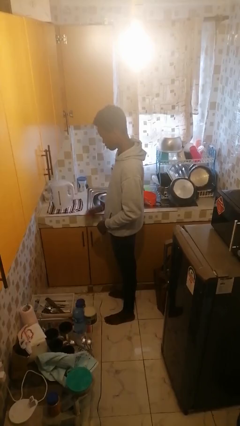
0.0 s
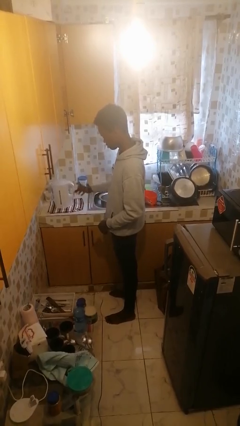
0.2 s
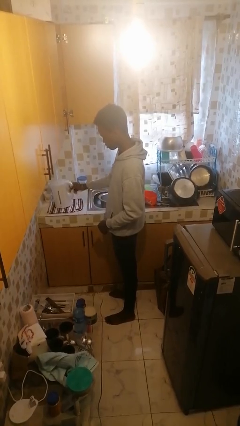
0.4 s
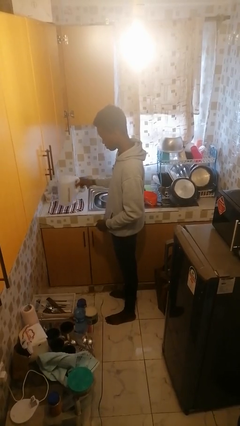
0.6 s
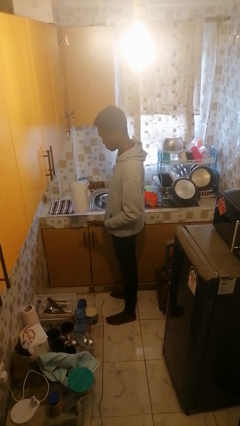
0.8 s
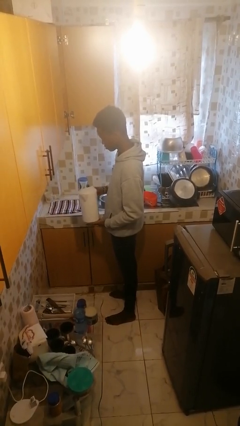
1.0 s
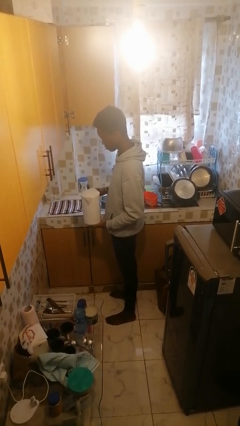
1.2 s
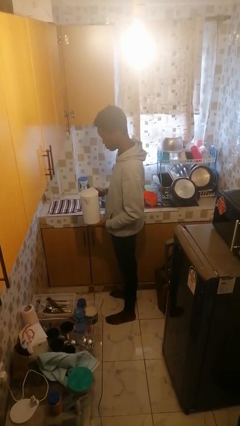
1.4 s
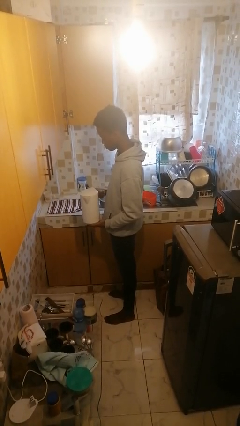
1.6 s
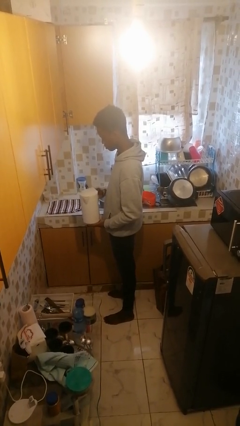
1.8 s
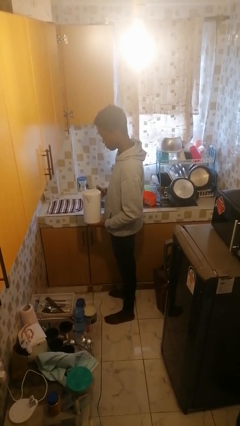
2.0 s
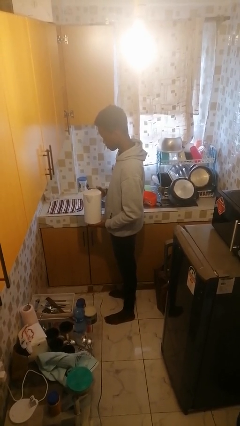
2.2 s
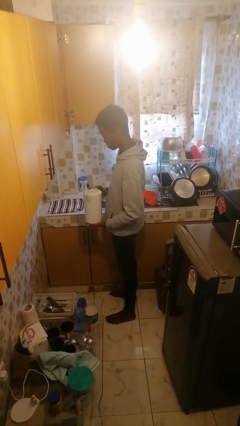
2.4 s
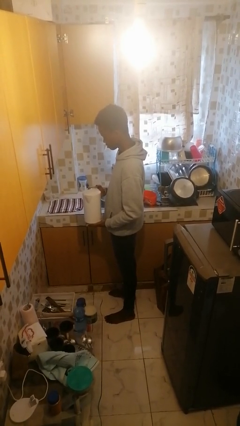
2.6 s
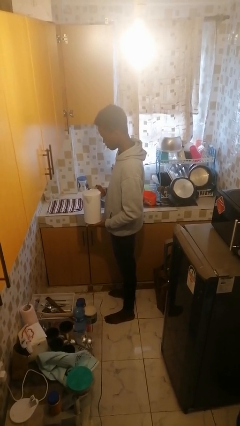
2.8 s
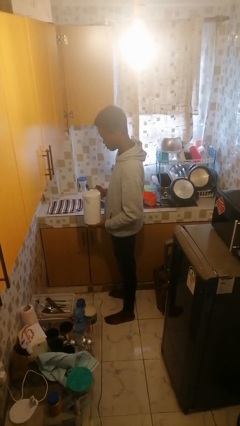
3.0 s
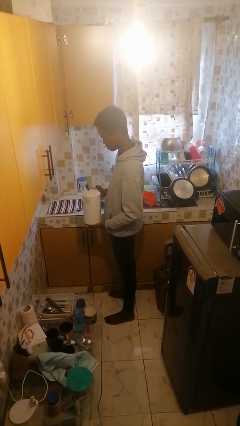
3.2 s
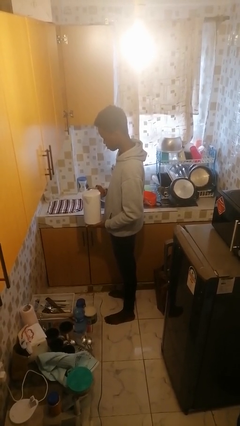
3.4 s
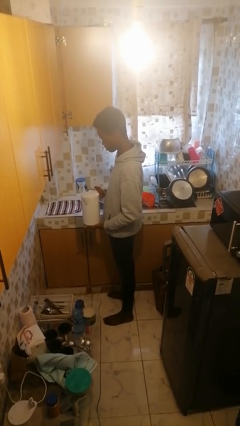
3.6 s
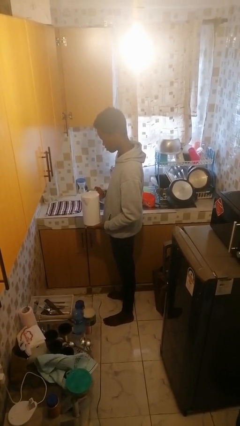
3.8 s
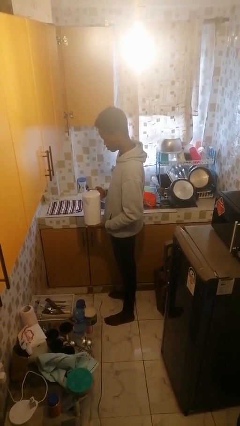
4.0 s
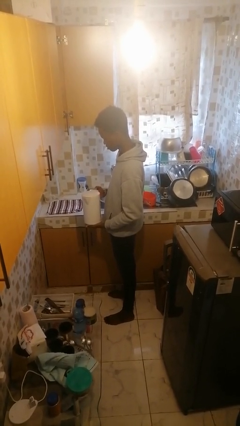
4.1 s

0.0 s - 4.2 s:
person picks up object from countertop

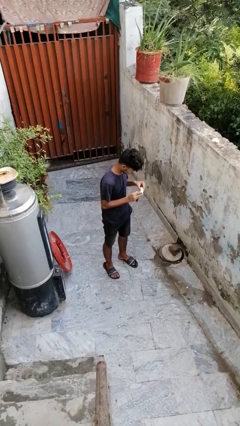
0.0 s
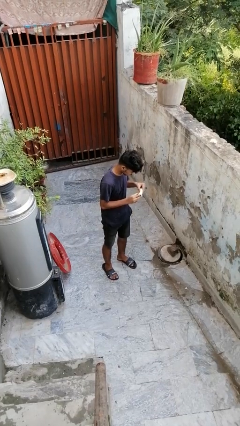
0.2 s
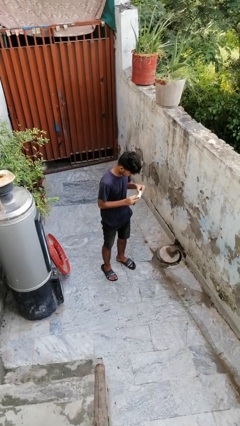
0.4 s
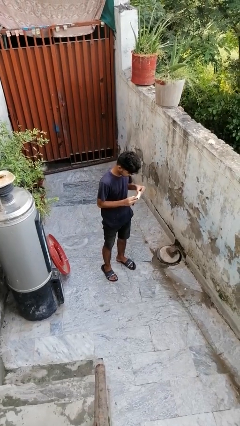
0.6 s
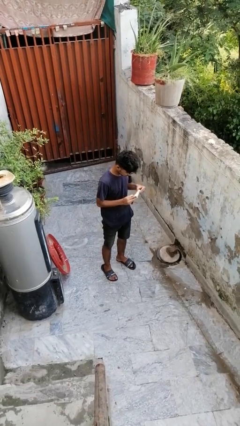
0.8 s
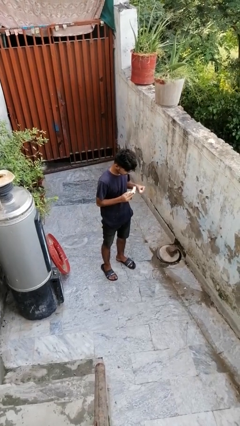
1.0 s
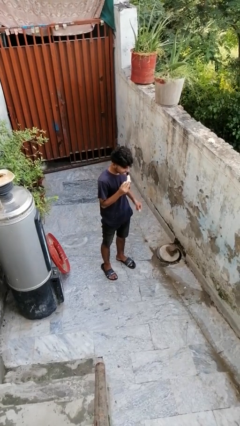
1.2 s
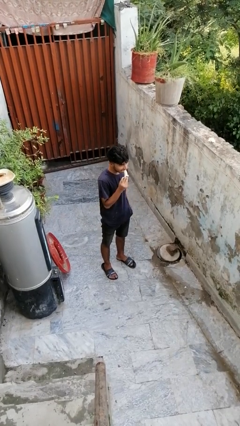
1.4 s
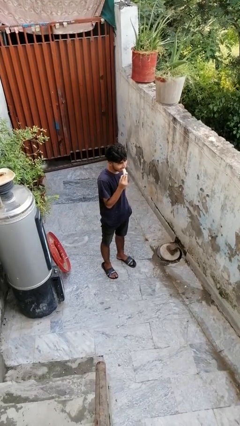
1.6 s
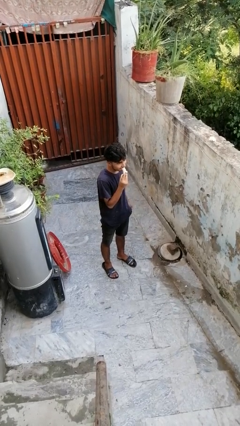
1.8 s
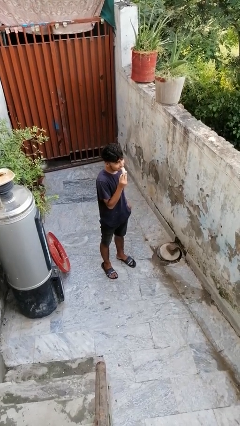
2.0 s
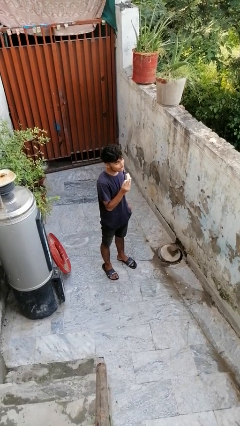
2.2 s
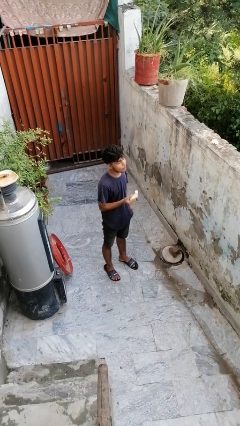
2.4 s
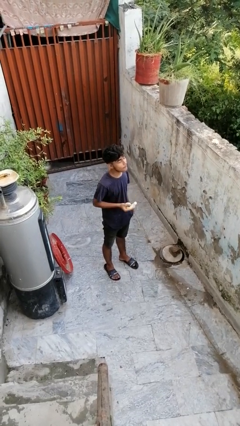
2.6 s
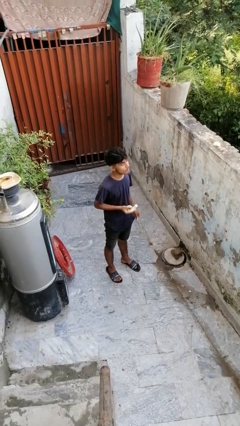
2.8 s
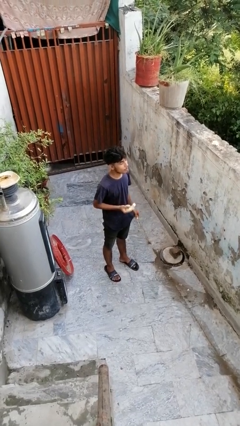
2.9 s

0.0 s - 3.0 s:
person eats banana

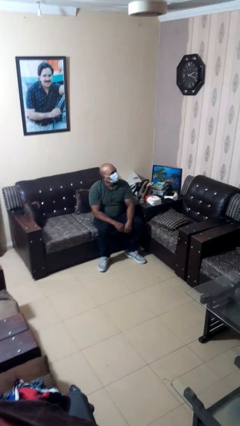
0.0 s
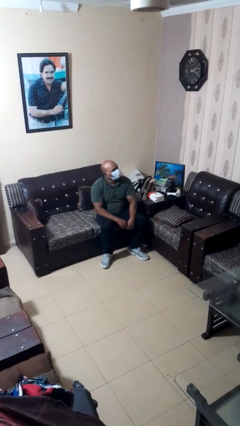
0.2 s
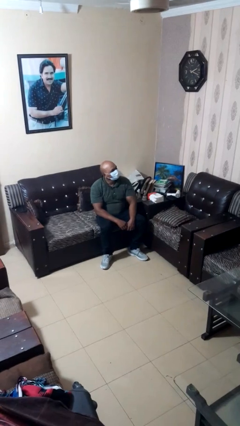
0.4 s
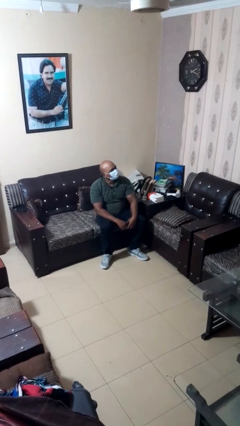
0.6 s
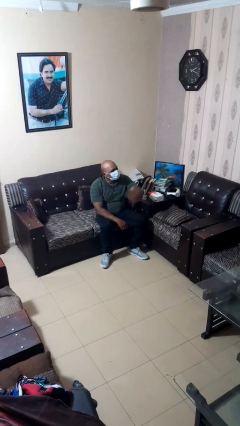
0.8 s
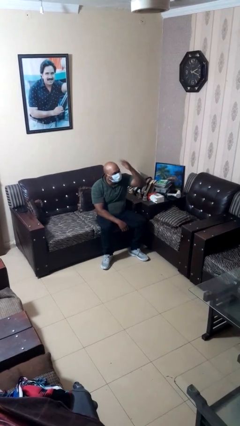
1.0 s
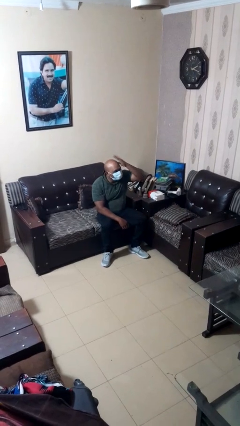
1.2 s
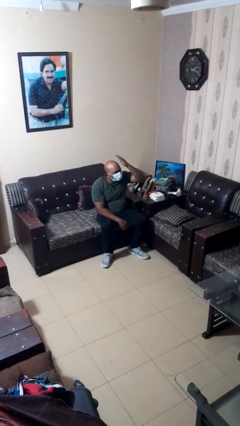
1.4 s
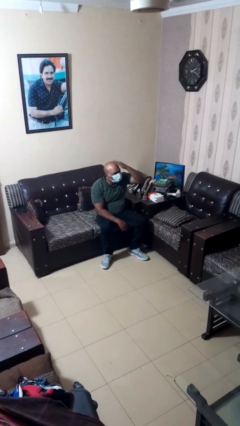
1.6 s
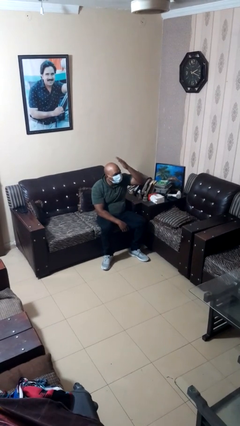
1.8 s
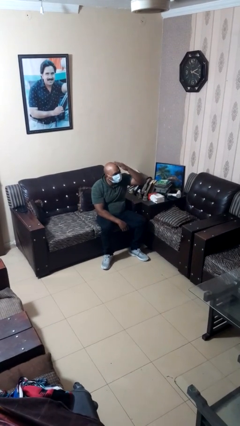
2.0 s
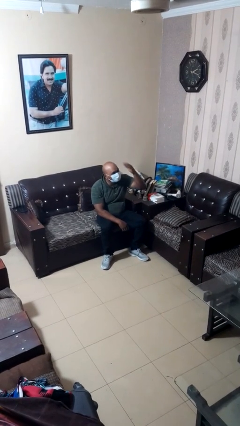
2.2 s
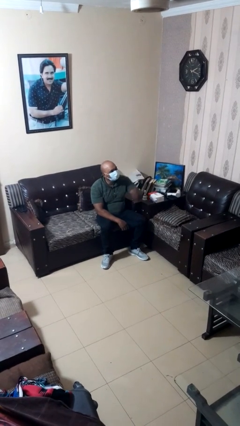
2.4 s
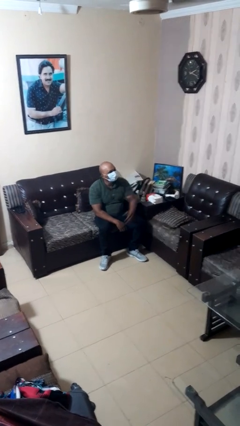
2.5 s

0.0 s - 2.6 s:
person pats head

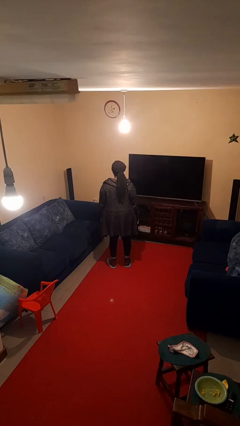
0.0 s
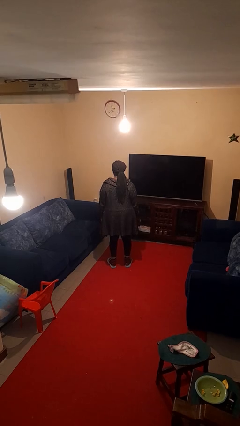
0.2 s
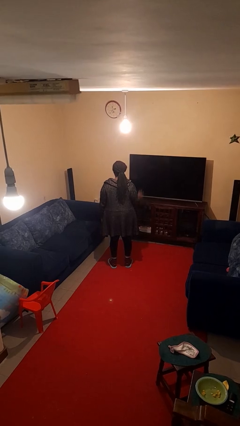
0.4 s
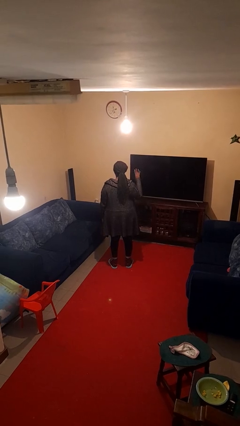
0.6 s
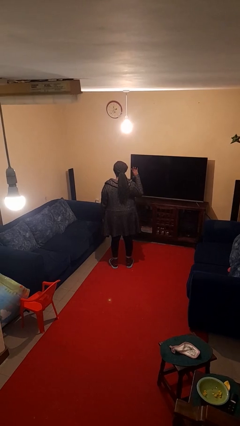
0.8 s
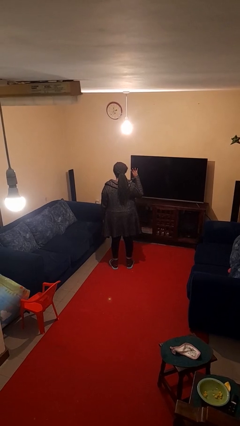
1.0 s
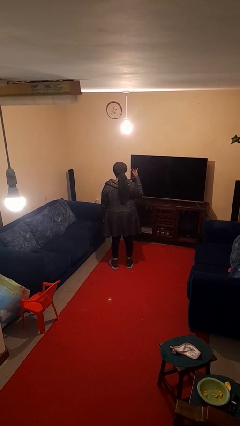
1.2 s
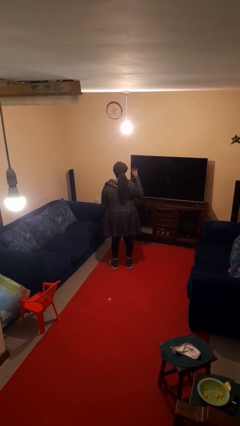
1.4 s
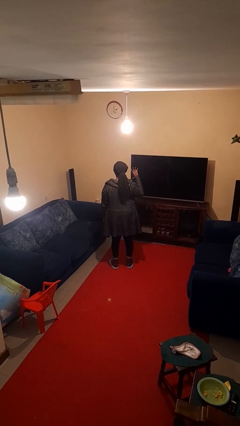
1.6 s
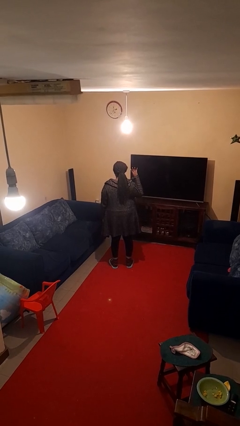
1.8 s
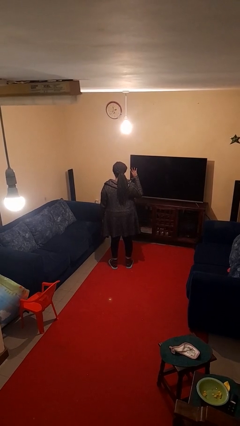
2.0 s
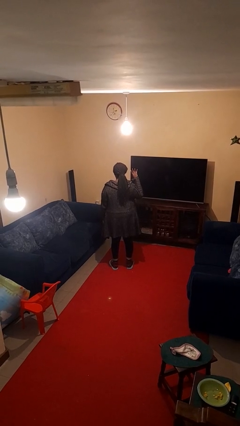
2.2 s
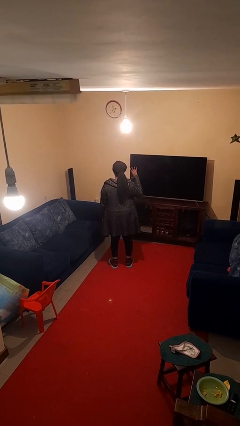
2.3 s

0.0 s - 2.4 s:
person gestures number four

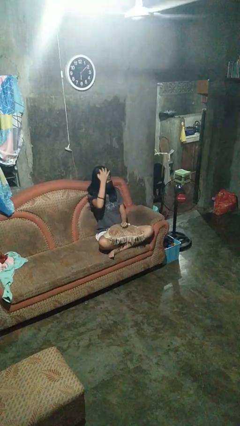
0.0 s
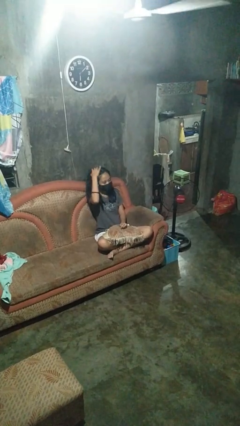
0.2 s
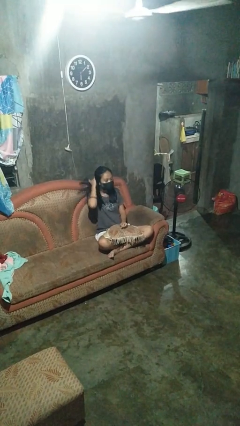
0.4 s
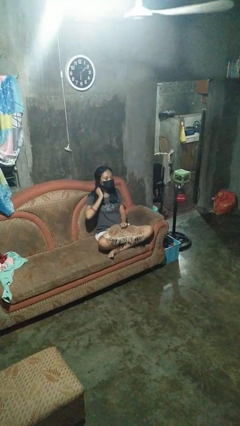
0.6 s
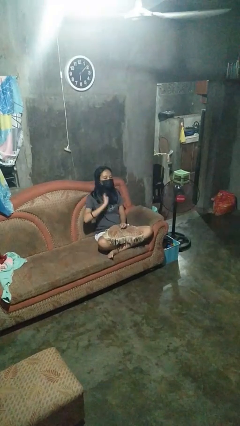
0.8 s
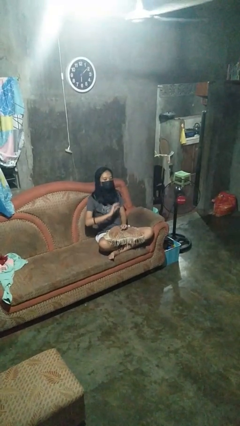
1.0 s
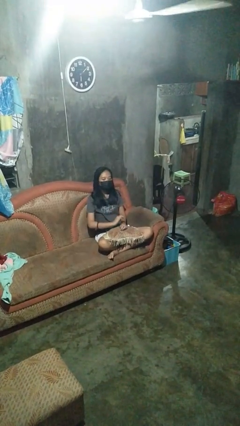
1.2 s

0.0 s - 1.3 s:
person strokes hair

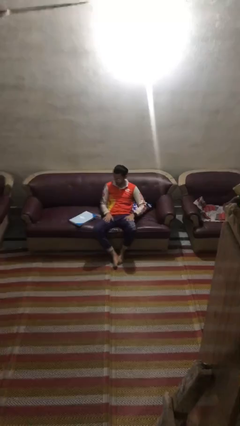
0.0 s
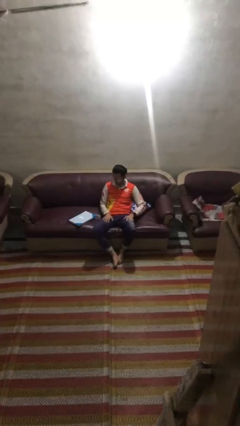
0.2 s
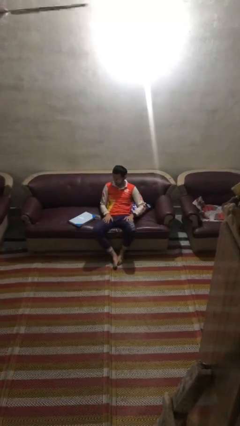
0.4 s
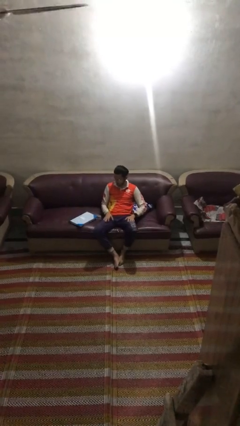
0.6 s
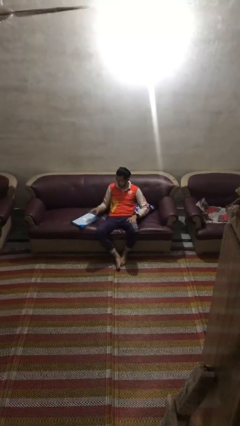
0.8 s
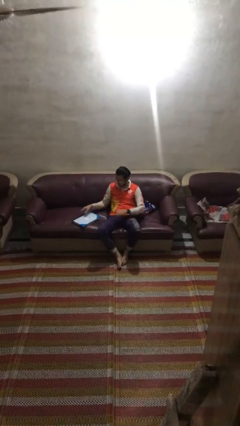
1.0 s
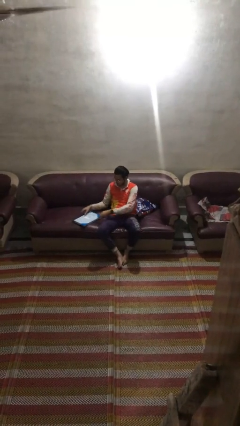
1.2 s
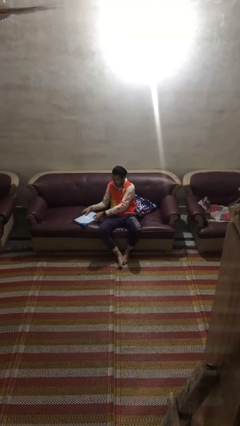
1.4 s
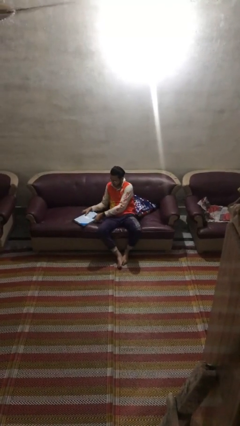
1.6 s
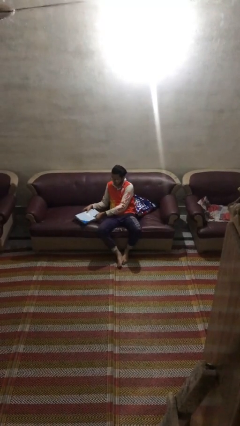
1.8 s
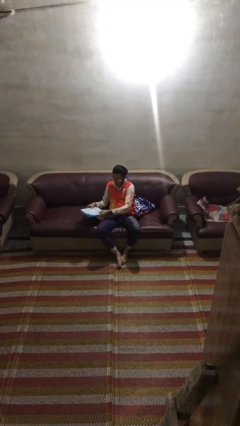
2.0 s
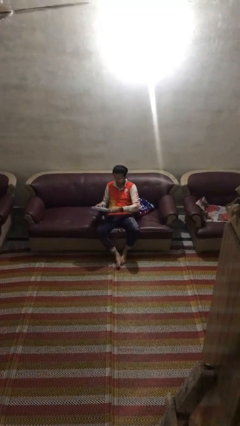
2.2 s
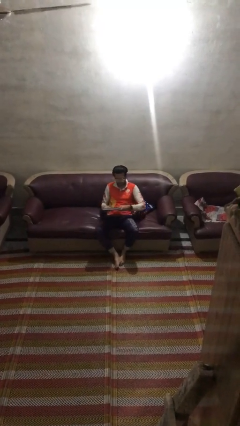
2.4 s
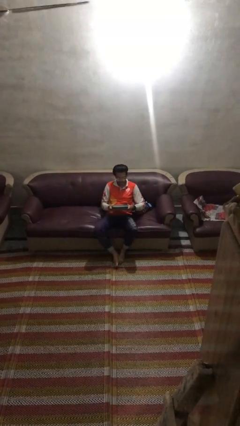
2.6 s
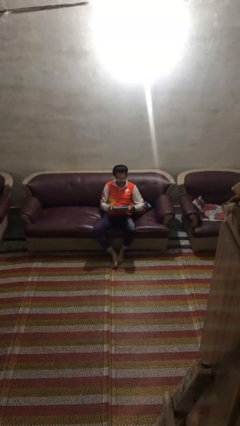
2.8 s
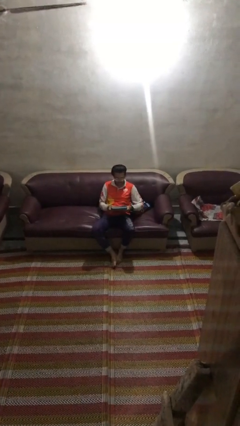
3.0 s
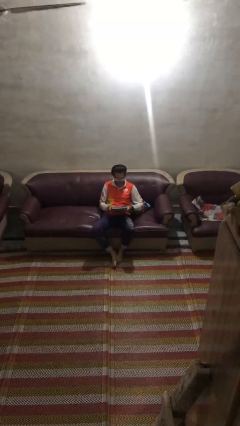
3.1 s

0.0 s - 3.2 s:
person picks up object from couch

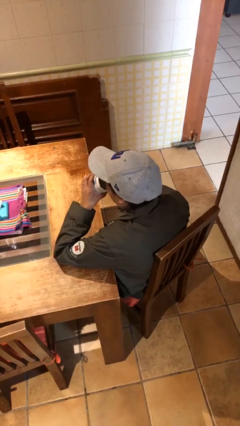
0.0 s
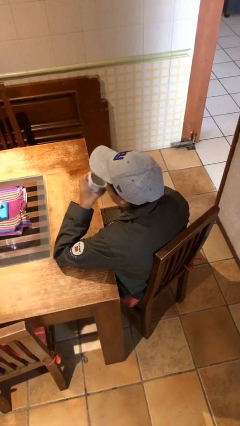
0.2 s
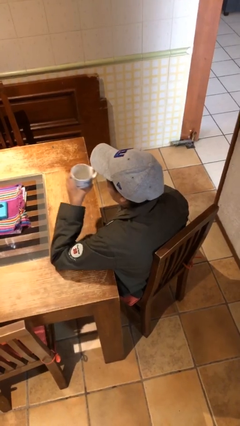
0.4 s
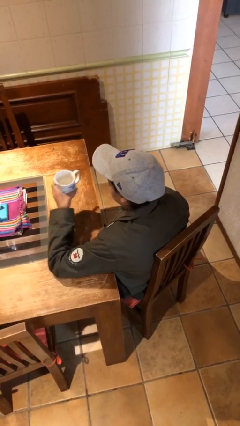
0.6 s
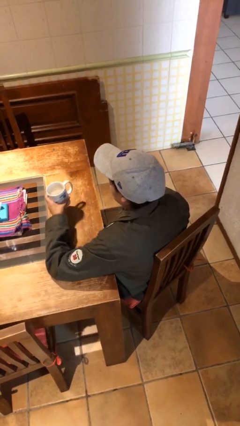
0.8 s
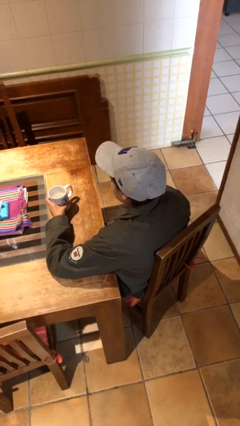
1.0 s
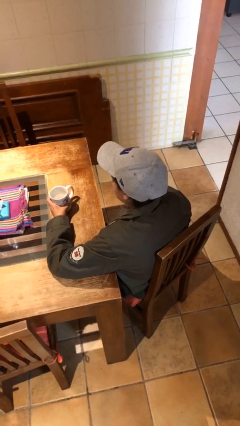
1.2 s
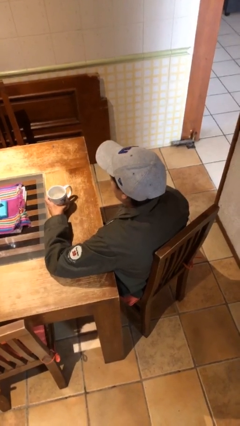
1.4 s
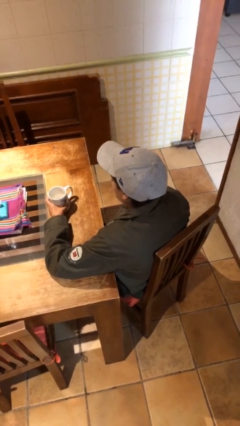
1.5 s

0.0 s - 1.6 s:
person puts down object on table
